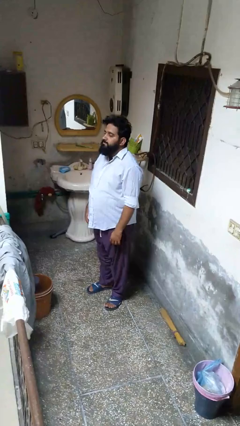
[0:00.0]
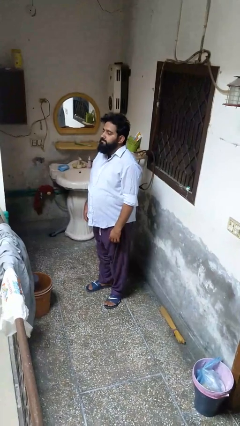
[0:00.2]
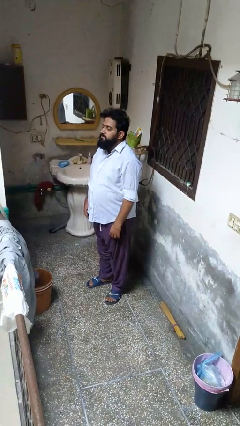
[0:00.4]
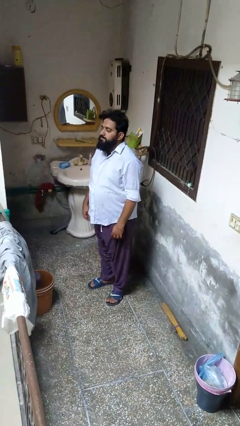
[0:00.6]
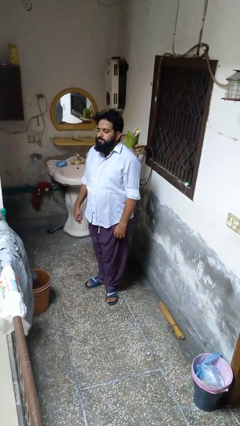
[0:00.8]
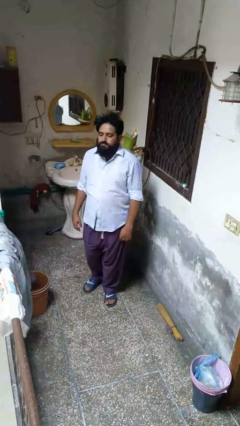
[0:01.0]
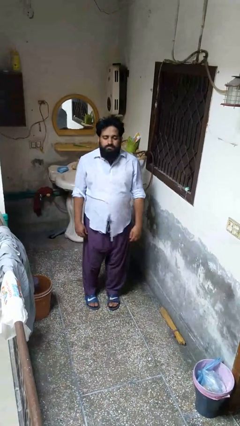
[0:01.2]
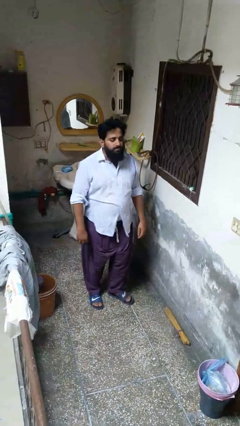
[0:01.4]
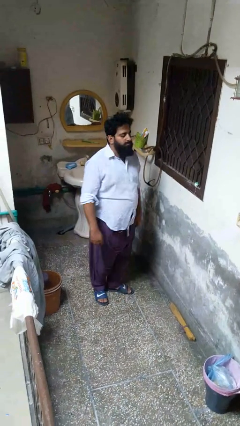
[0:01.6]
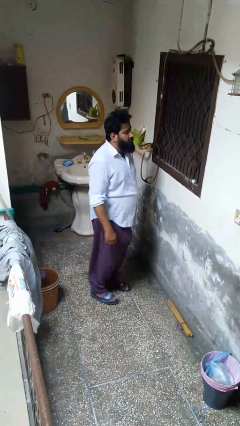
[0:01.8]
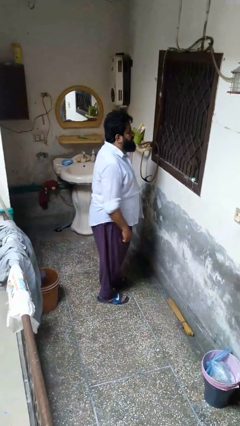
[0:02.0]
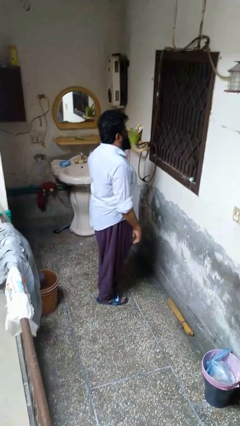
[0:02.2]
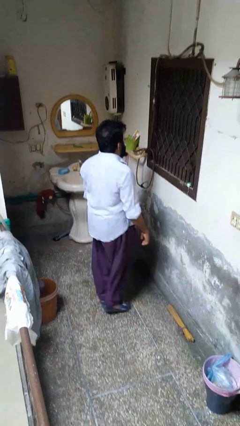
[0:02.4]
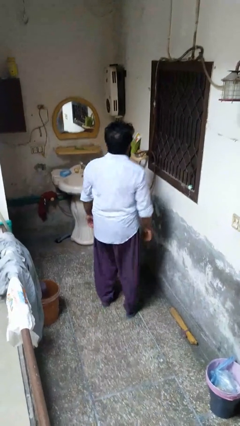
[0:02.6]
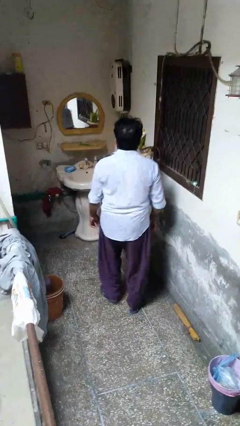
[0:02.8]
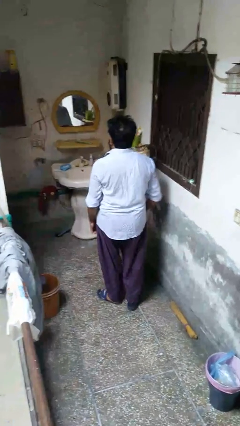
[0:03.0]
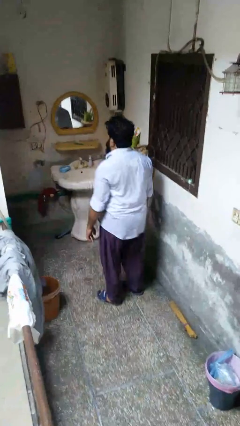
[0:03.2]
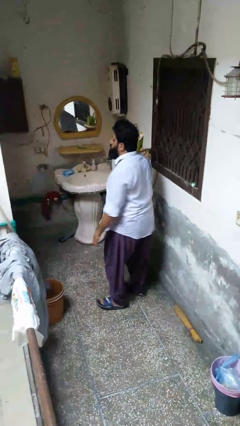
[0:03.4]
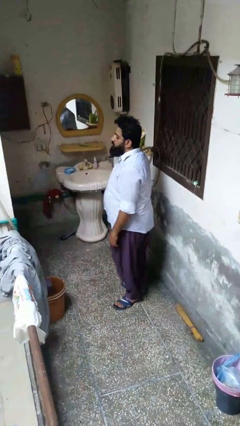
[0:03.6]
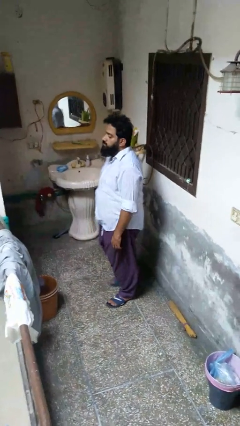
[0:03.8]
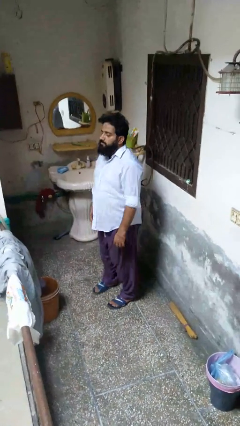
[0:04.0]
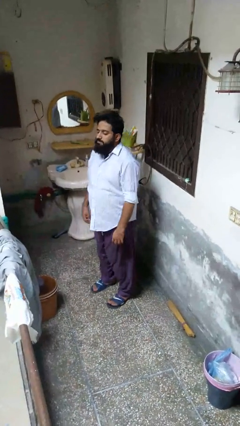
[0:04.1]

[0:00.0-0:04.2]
person twirls

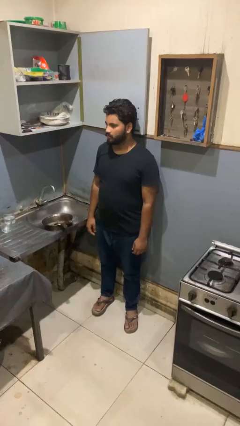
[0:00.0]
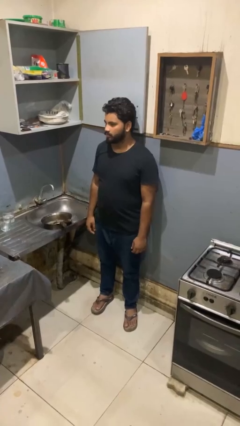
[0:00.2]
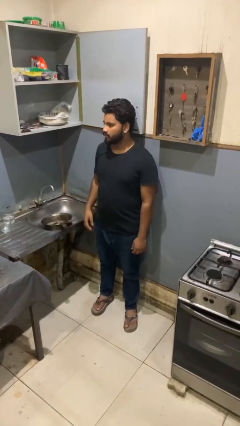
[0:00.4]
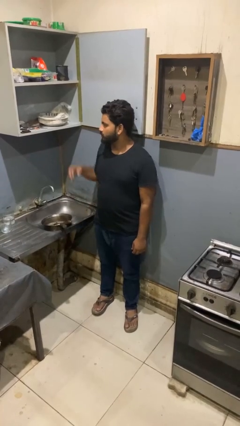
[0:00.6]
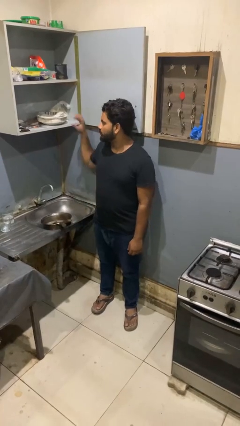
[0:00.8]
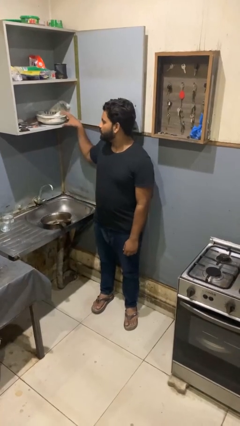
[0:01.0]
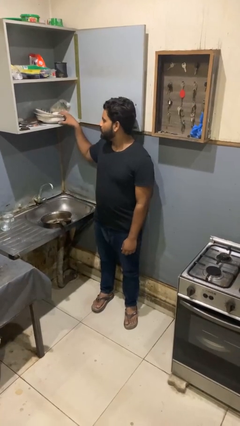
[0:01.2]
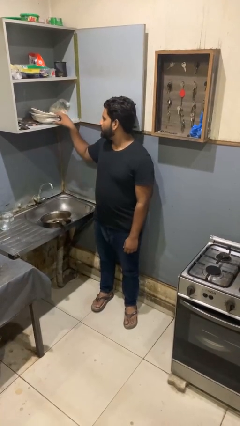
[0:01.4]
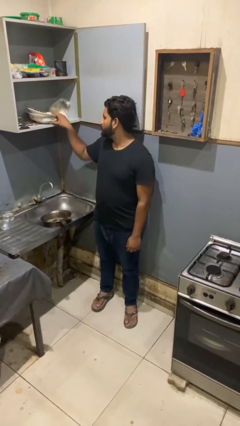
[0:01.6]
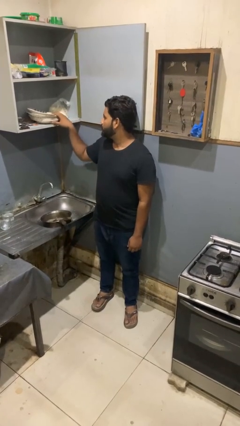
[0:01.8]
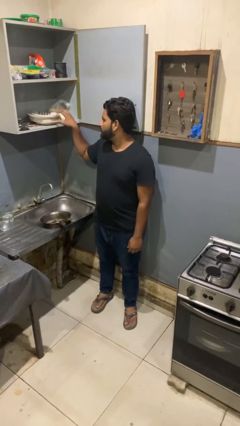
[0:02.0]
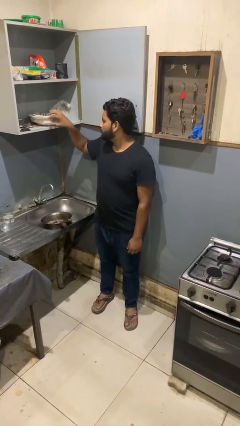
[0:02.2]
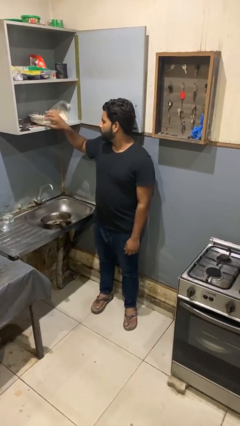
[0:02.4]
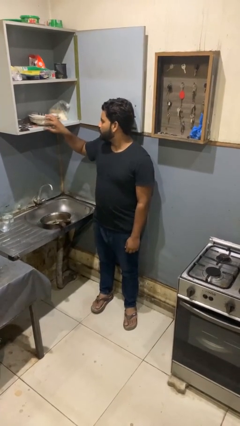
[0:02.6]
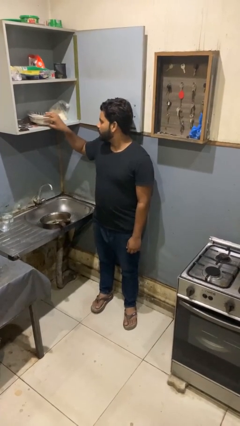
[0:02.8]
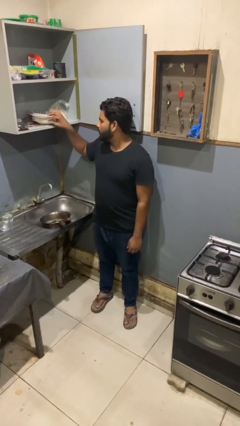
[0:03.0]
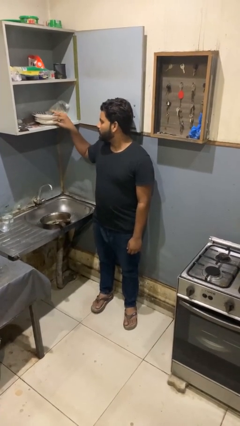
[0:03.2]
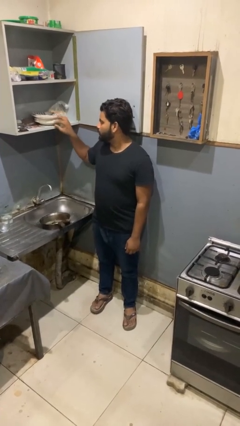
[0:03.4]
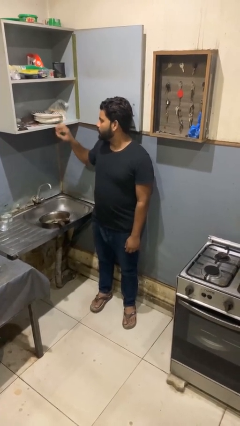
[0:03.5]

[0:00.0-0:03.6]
person searches in kitchen drawer

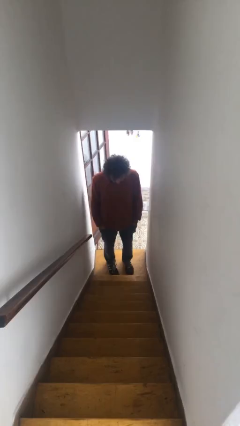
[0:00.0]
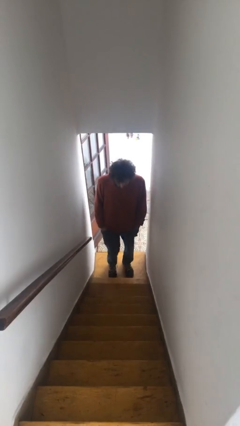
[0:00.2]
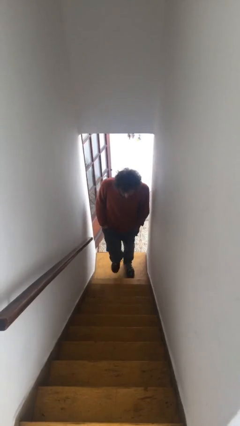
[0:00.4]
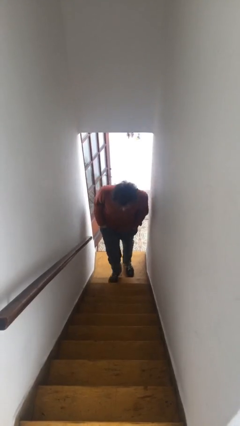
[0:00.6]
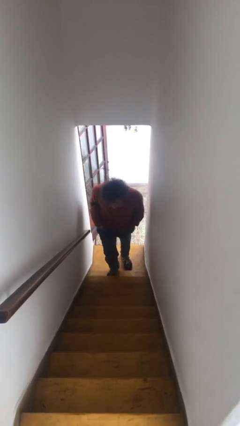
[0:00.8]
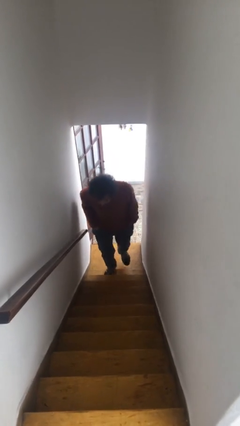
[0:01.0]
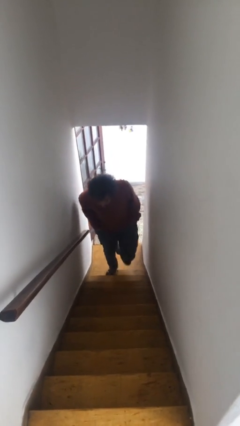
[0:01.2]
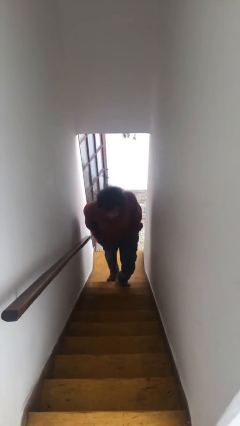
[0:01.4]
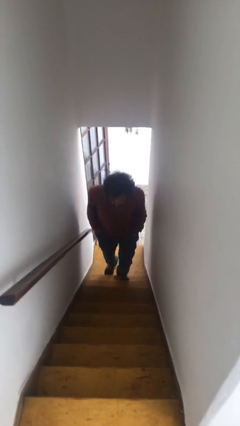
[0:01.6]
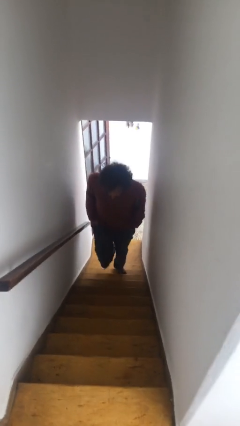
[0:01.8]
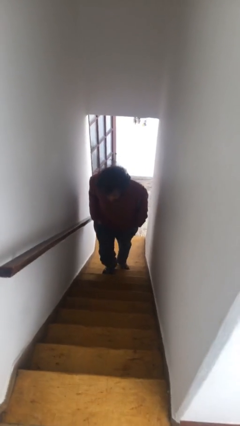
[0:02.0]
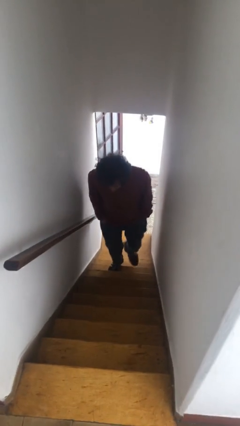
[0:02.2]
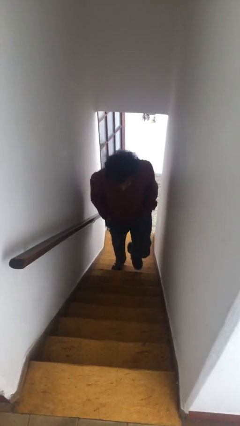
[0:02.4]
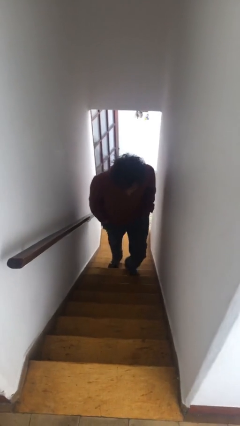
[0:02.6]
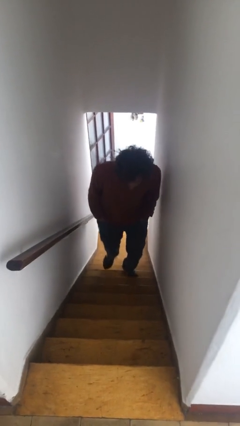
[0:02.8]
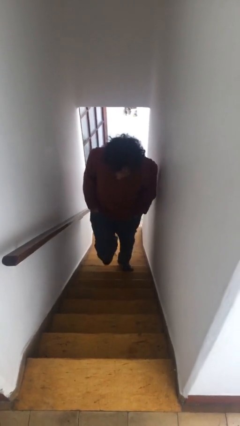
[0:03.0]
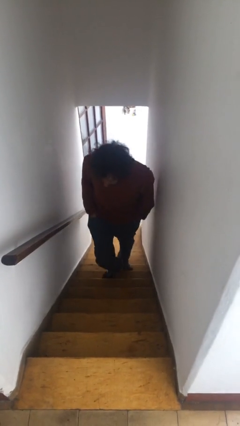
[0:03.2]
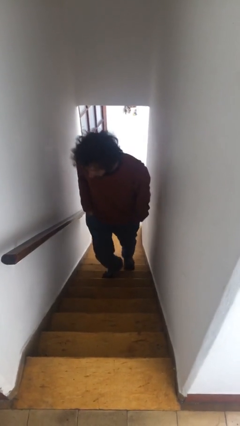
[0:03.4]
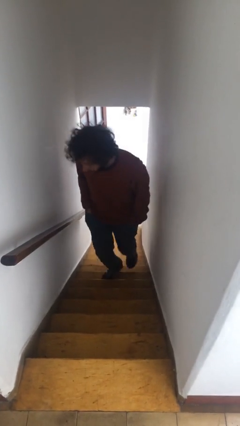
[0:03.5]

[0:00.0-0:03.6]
person climbs up stairs

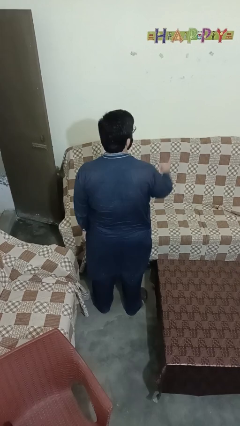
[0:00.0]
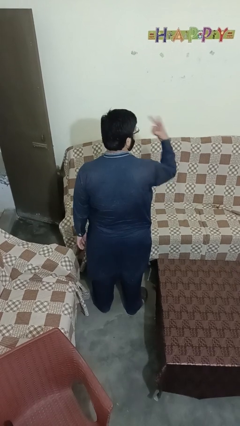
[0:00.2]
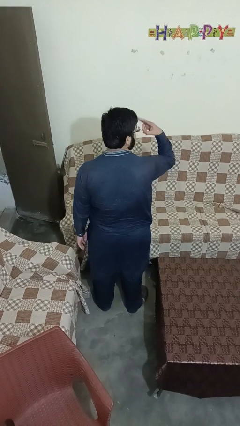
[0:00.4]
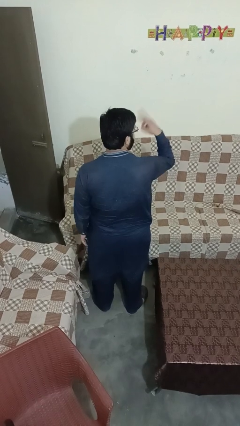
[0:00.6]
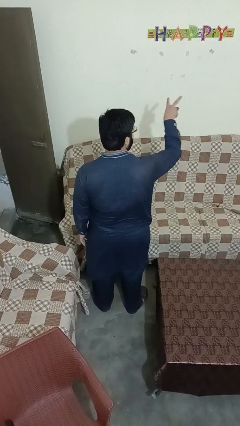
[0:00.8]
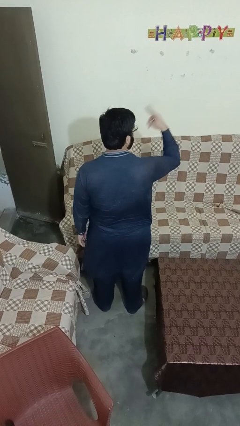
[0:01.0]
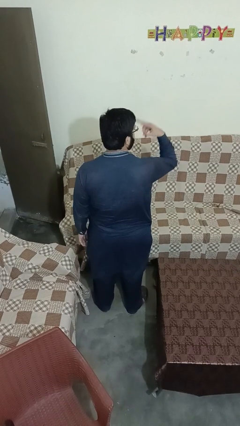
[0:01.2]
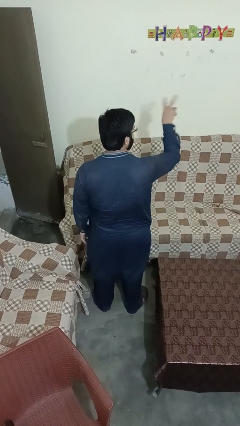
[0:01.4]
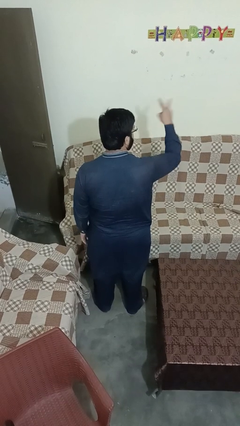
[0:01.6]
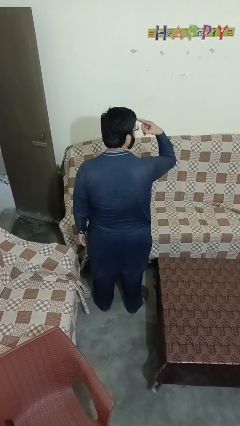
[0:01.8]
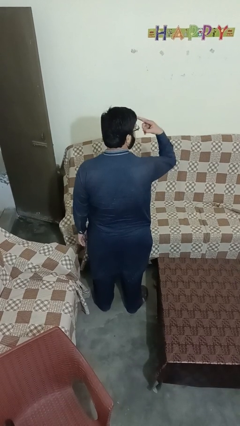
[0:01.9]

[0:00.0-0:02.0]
person gestures watch closely

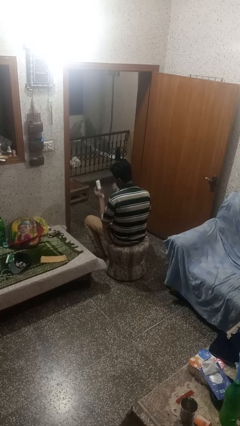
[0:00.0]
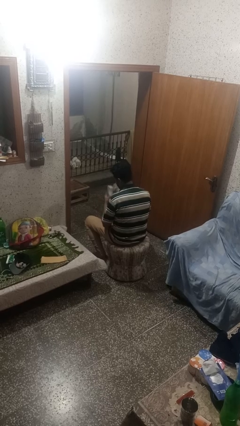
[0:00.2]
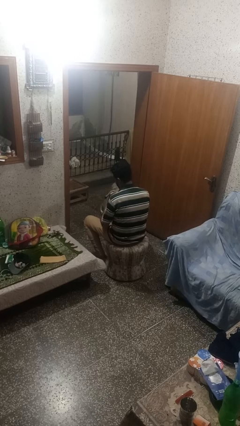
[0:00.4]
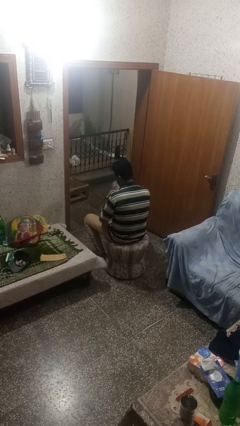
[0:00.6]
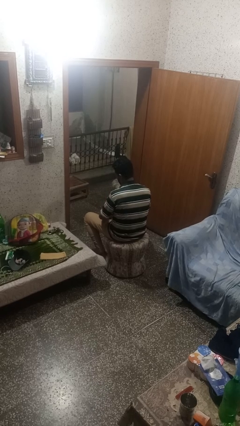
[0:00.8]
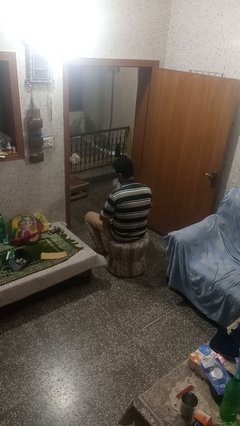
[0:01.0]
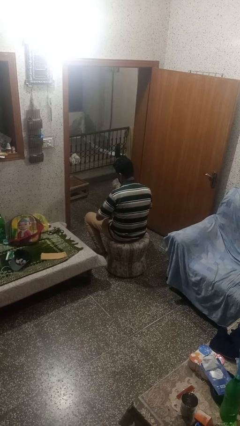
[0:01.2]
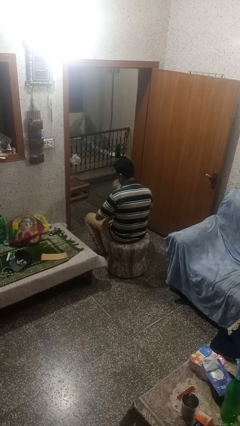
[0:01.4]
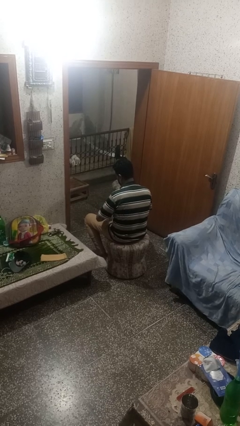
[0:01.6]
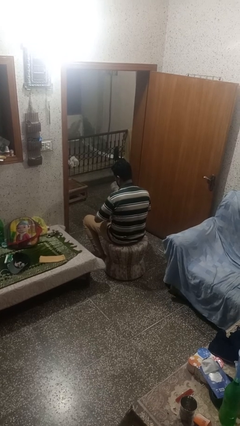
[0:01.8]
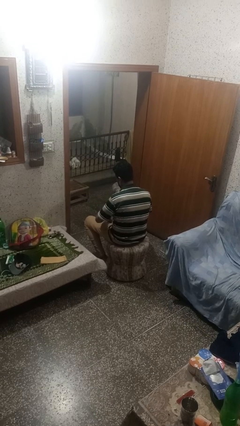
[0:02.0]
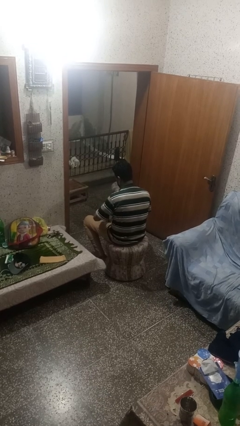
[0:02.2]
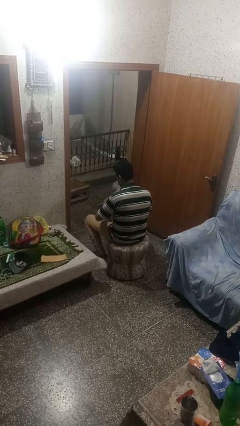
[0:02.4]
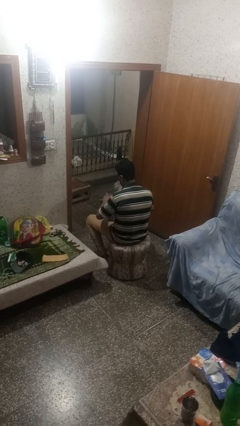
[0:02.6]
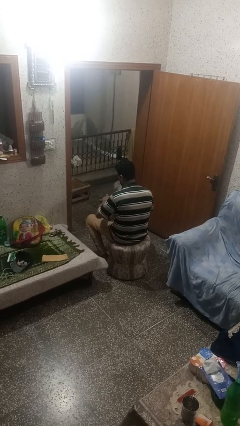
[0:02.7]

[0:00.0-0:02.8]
person puts object into purse

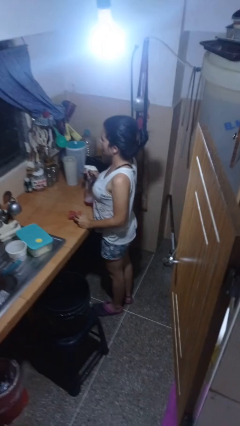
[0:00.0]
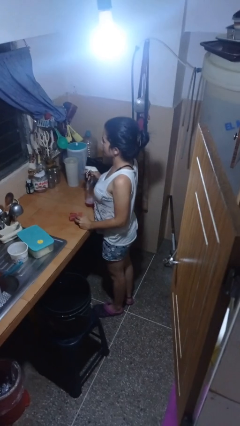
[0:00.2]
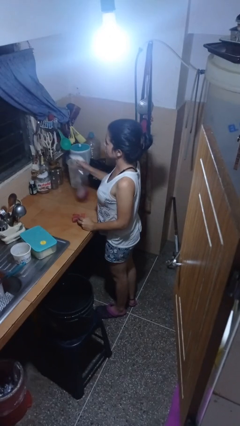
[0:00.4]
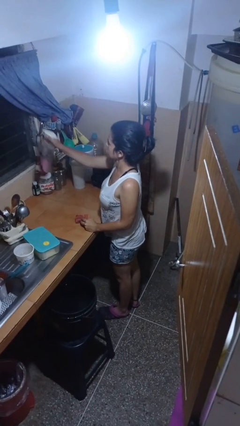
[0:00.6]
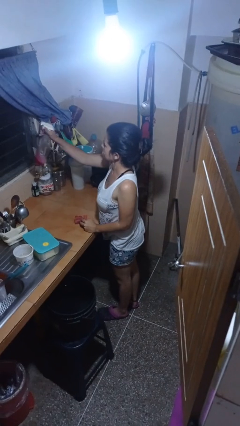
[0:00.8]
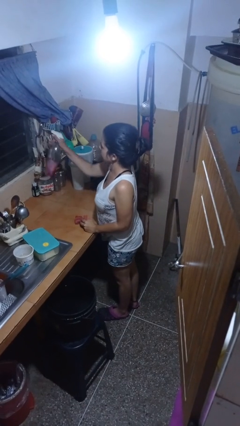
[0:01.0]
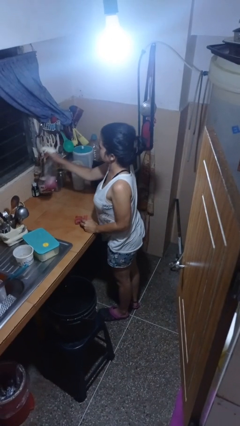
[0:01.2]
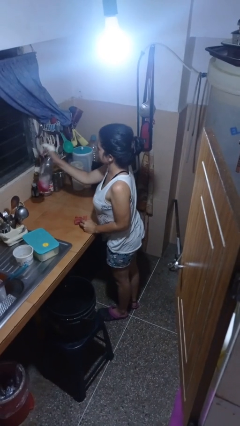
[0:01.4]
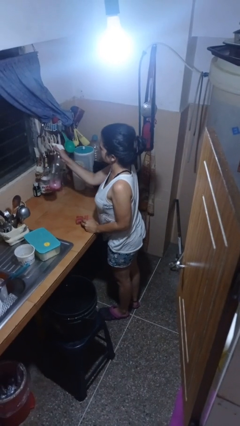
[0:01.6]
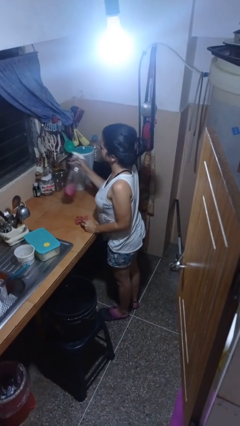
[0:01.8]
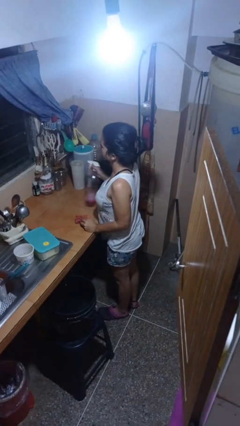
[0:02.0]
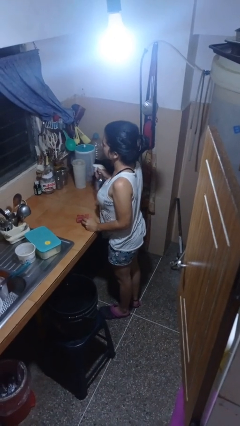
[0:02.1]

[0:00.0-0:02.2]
person sprays from bottle
